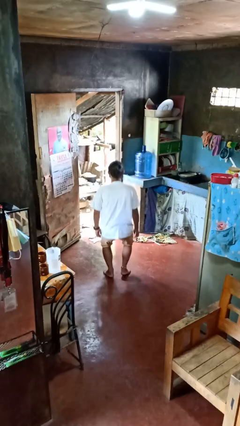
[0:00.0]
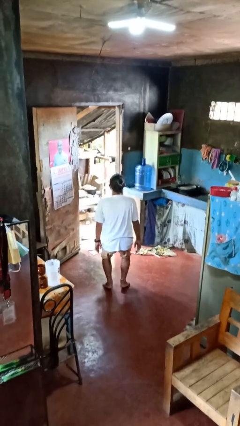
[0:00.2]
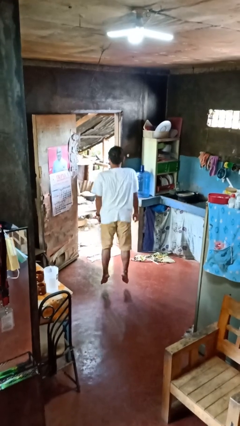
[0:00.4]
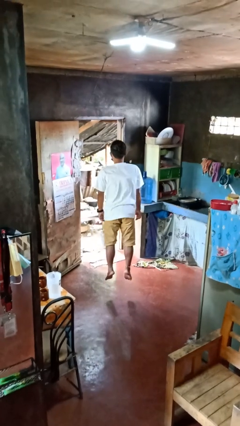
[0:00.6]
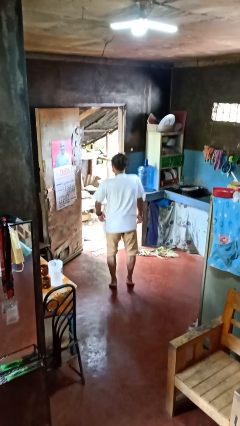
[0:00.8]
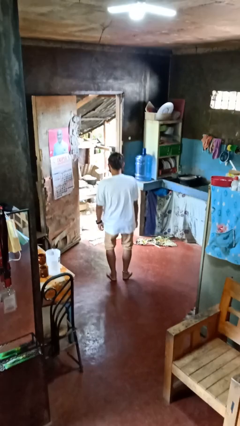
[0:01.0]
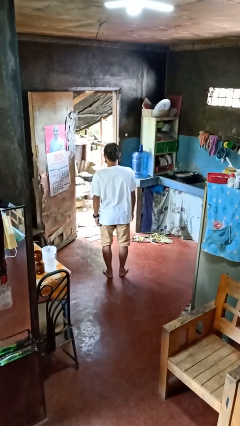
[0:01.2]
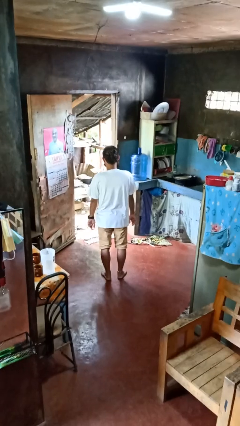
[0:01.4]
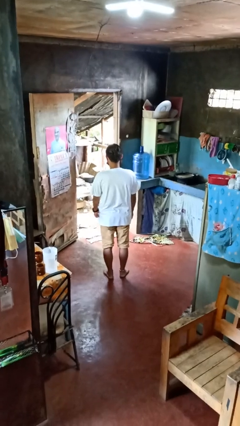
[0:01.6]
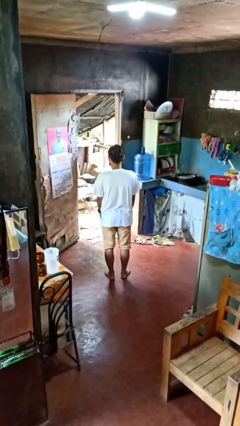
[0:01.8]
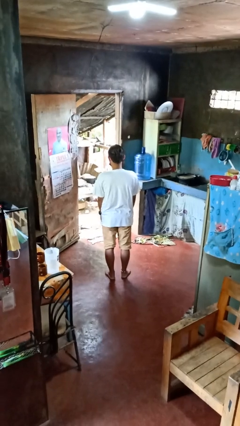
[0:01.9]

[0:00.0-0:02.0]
person jumps

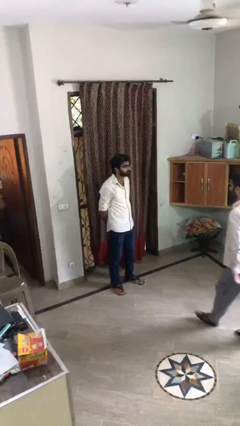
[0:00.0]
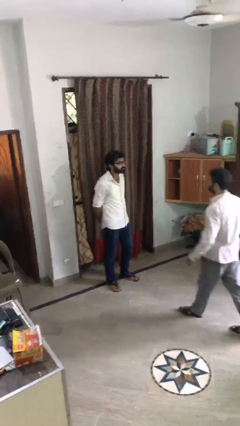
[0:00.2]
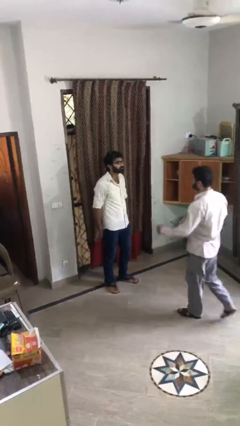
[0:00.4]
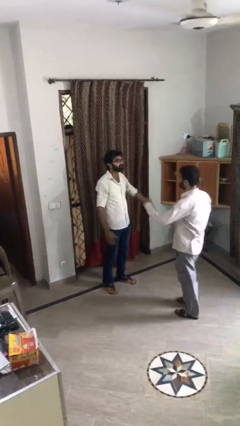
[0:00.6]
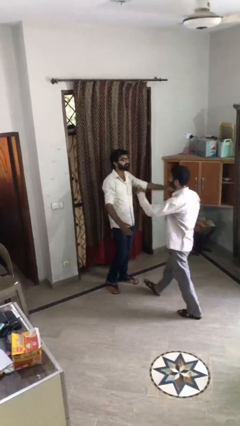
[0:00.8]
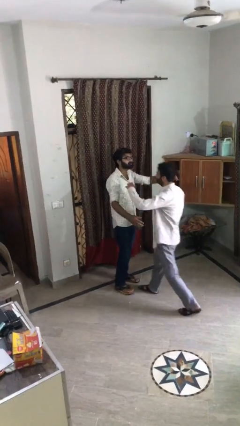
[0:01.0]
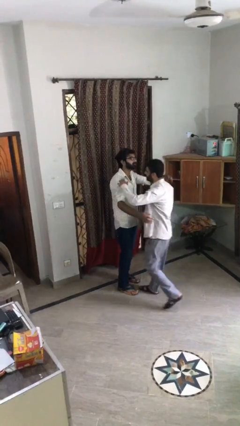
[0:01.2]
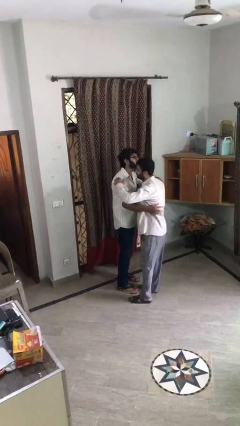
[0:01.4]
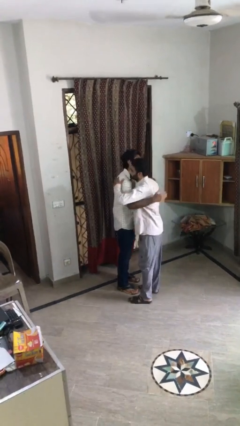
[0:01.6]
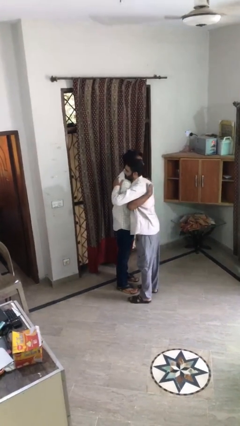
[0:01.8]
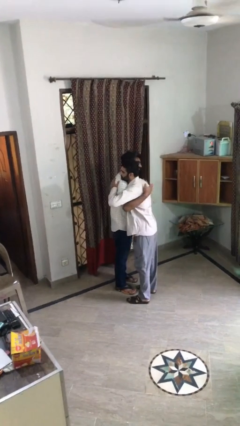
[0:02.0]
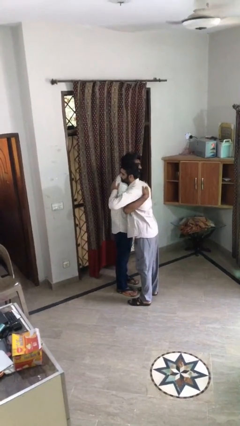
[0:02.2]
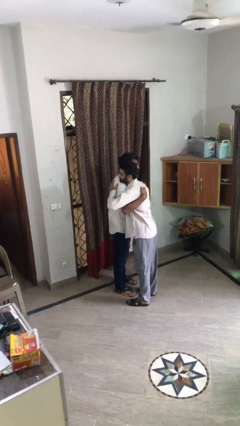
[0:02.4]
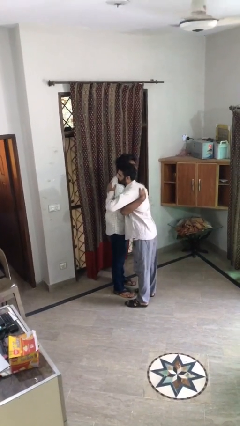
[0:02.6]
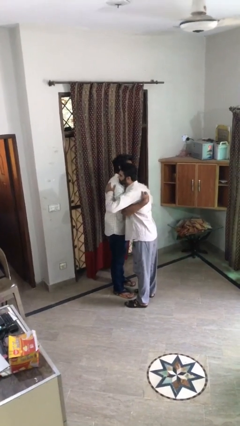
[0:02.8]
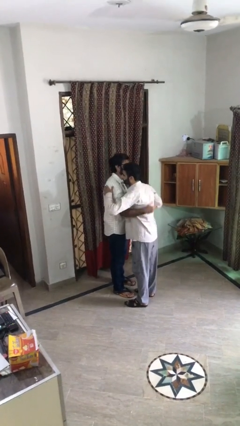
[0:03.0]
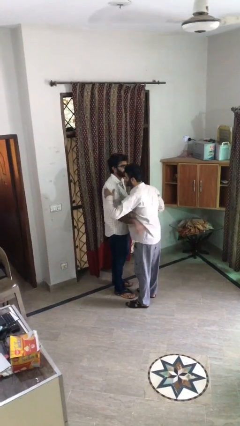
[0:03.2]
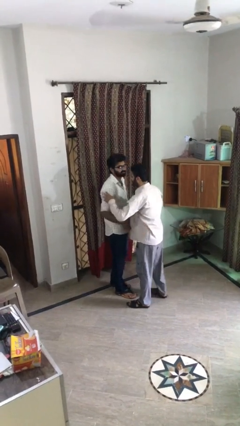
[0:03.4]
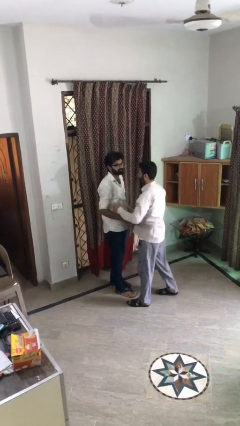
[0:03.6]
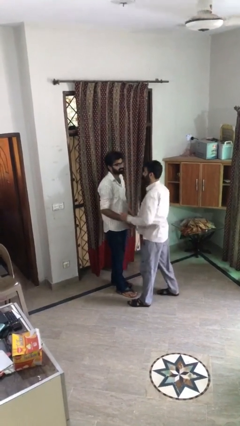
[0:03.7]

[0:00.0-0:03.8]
person embraces person

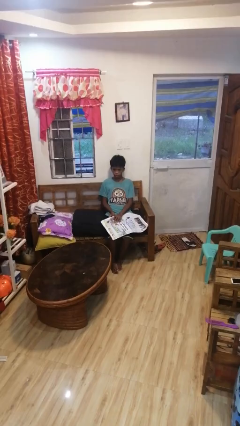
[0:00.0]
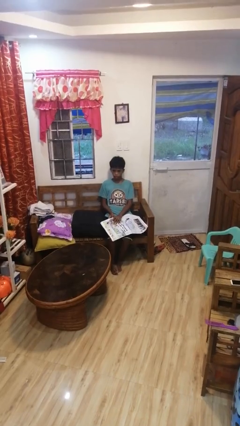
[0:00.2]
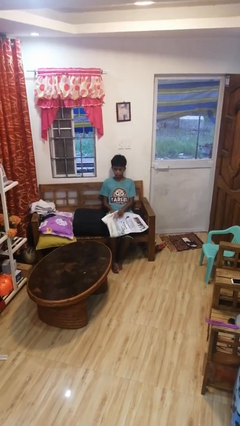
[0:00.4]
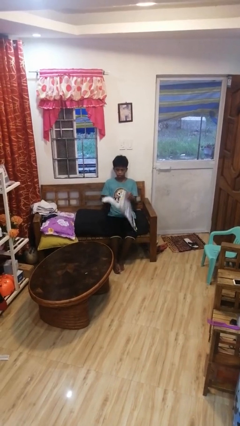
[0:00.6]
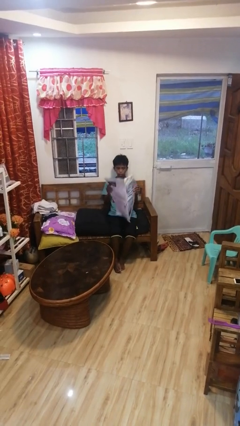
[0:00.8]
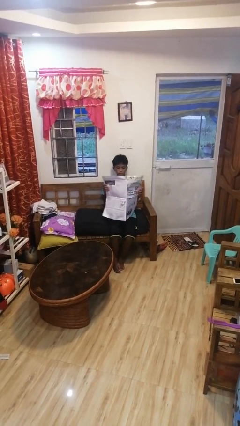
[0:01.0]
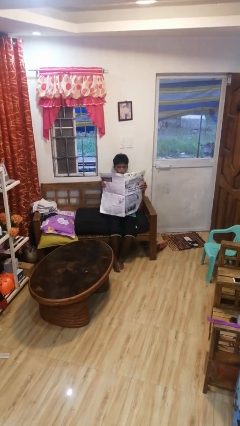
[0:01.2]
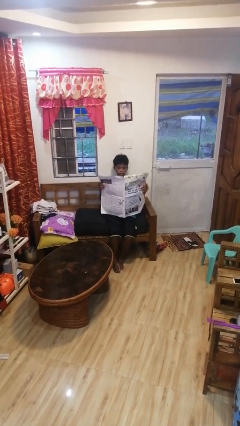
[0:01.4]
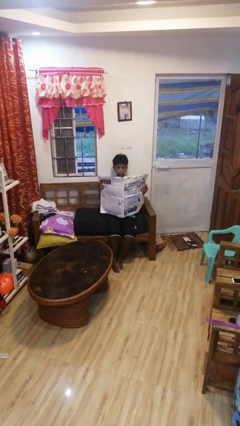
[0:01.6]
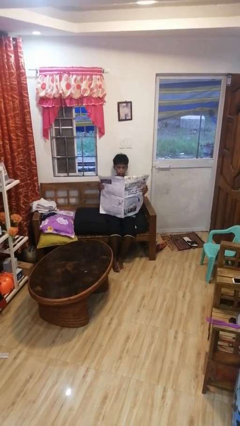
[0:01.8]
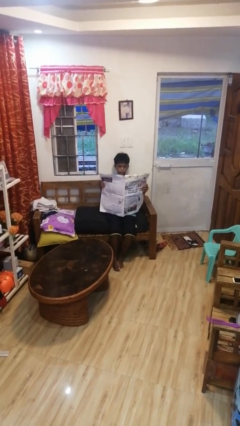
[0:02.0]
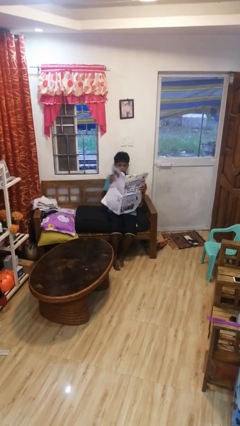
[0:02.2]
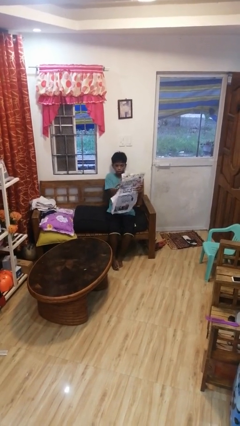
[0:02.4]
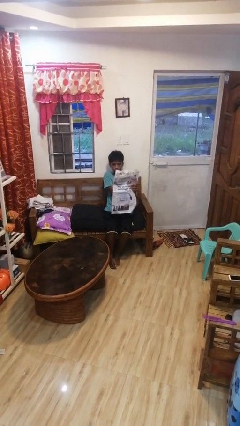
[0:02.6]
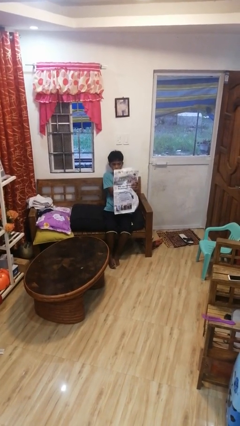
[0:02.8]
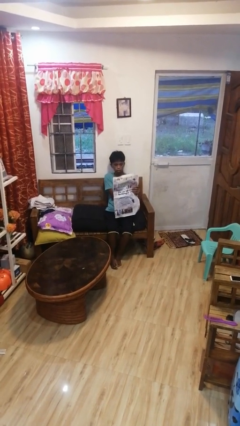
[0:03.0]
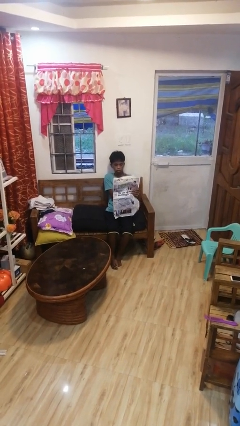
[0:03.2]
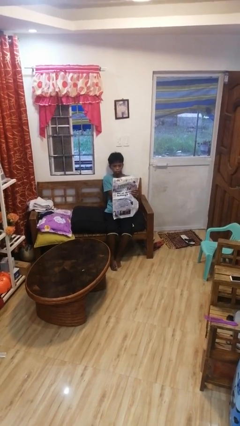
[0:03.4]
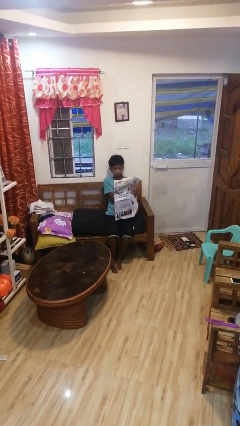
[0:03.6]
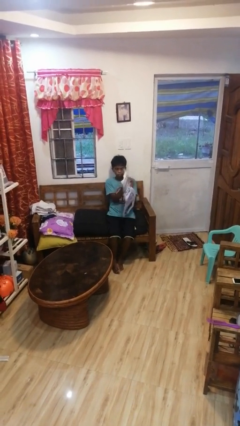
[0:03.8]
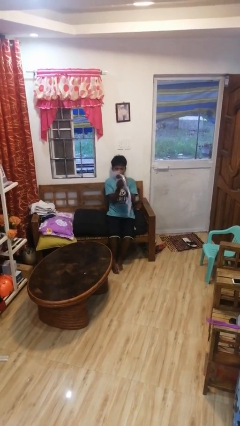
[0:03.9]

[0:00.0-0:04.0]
person reads newspaper

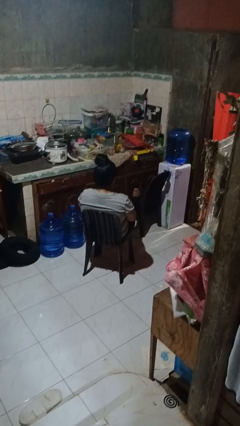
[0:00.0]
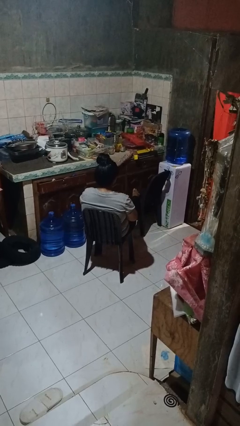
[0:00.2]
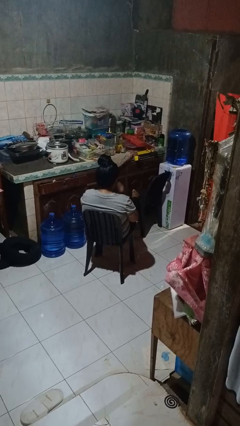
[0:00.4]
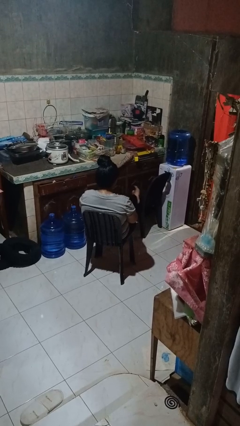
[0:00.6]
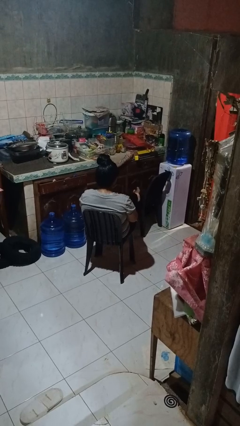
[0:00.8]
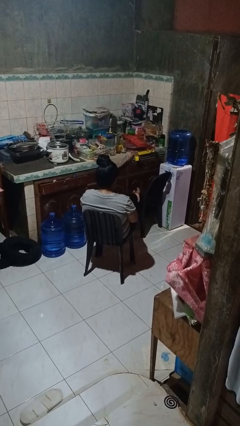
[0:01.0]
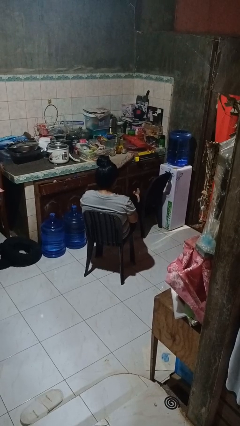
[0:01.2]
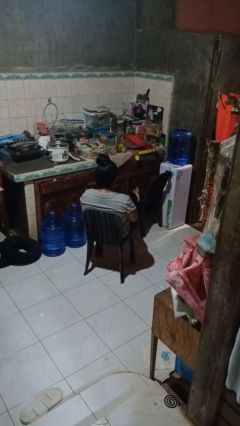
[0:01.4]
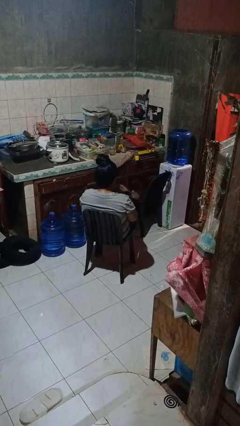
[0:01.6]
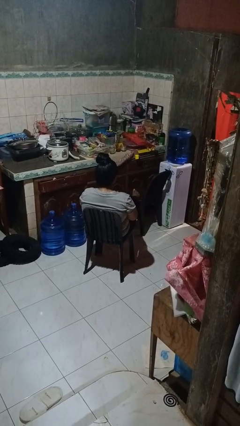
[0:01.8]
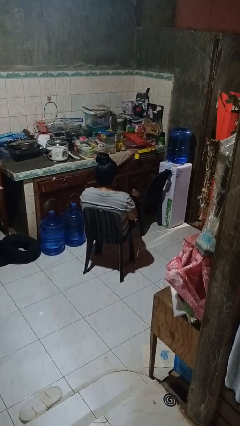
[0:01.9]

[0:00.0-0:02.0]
person puts feet up

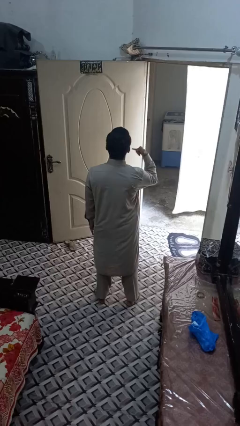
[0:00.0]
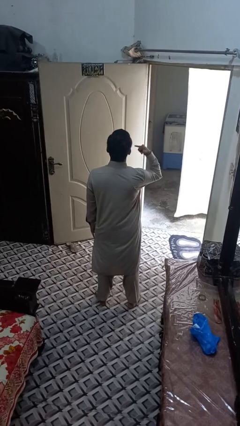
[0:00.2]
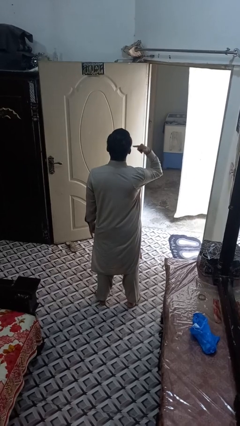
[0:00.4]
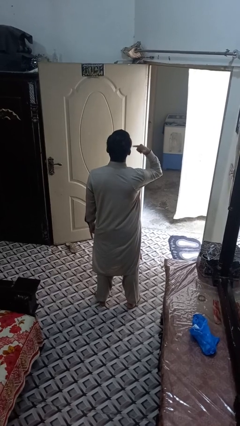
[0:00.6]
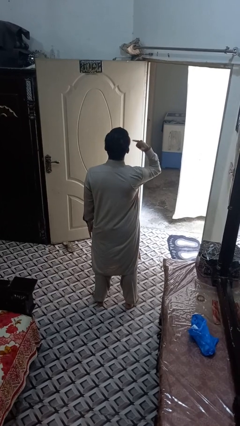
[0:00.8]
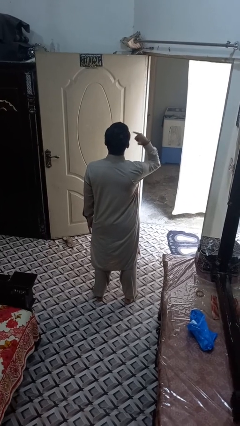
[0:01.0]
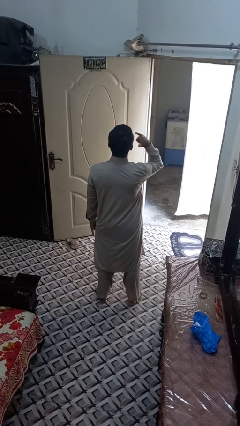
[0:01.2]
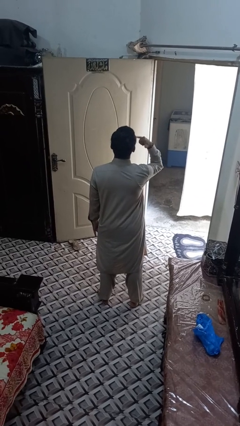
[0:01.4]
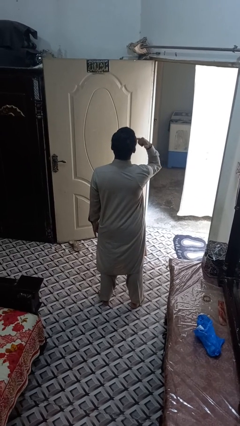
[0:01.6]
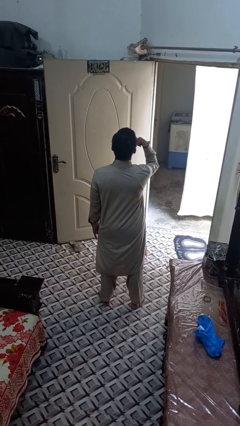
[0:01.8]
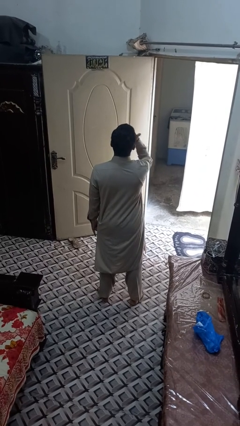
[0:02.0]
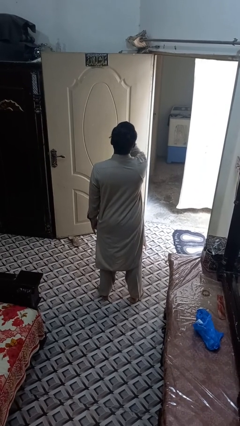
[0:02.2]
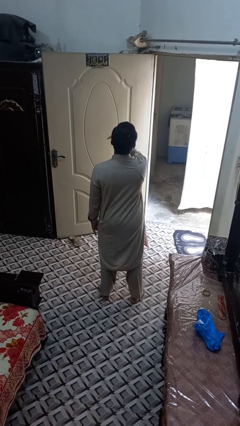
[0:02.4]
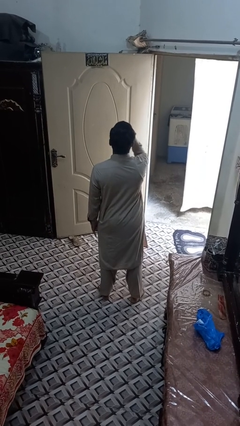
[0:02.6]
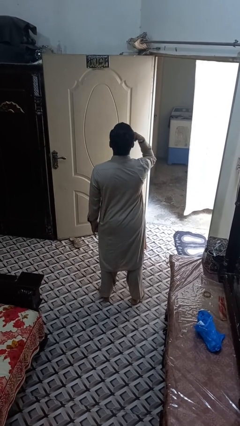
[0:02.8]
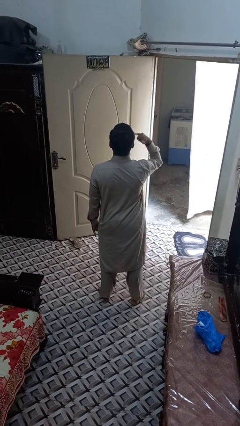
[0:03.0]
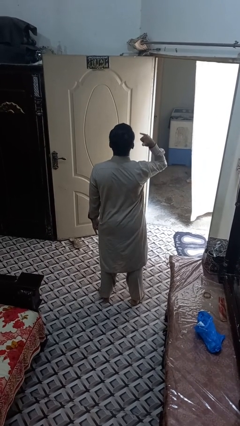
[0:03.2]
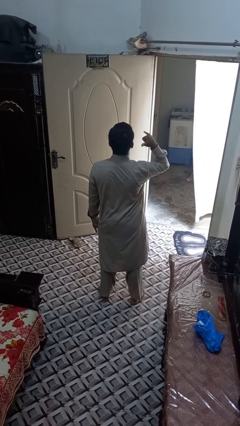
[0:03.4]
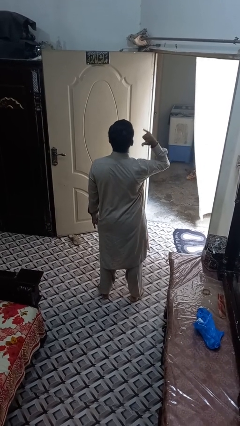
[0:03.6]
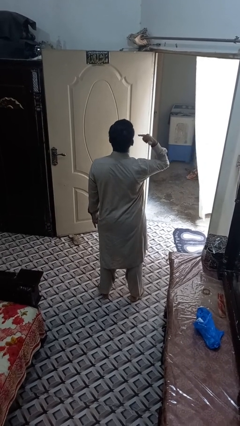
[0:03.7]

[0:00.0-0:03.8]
person gestures hang loose

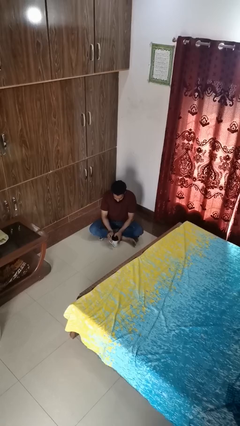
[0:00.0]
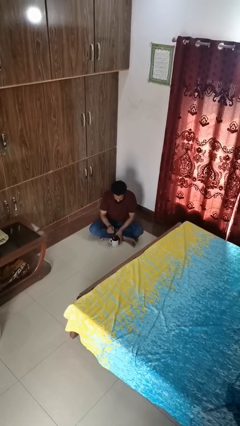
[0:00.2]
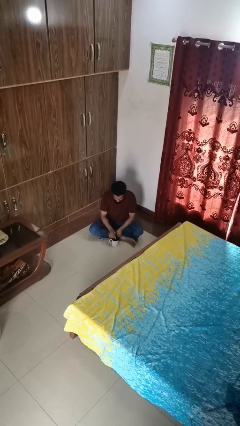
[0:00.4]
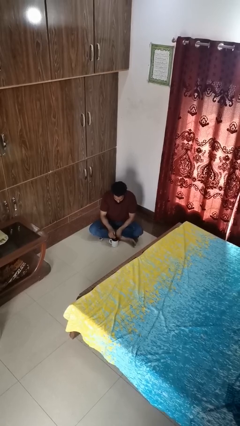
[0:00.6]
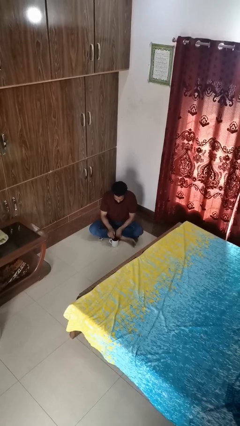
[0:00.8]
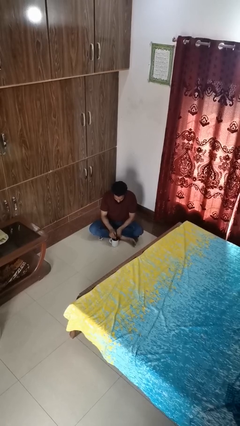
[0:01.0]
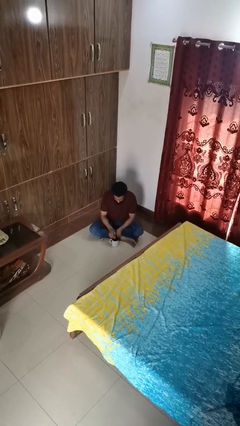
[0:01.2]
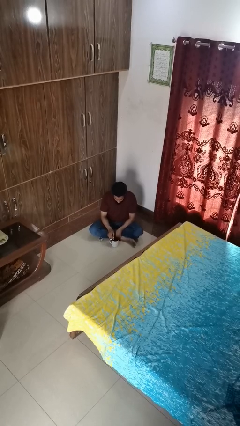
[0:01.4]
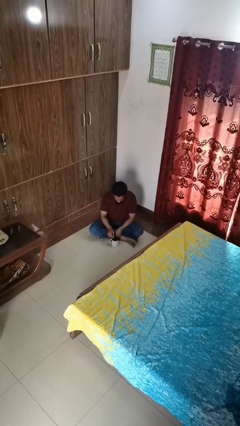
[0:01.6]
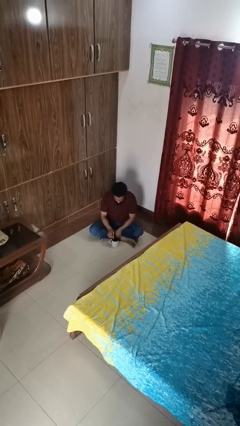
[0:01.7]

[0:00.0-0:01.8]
person stirs mug
